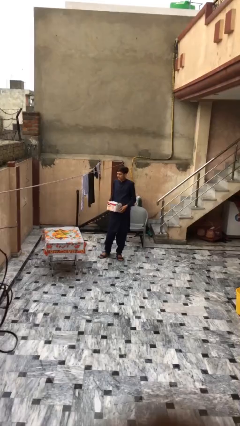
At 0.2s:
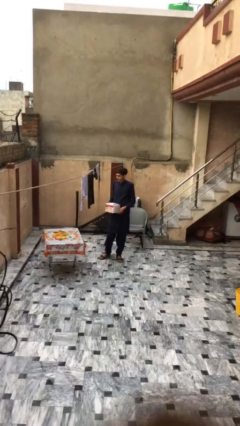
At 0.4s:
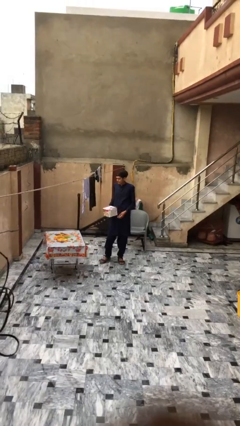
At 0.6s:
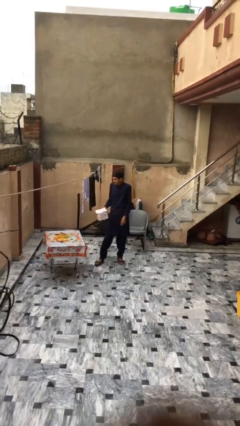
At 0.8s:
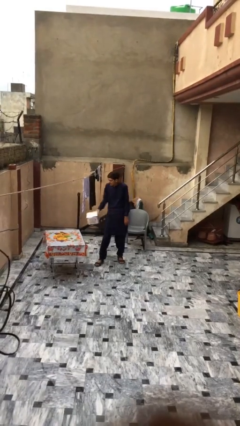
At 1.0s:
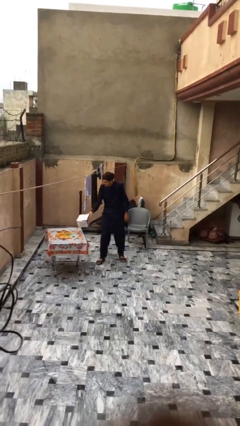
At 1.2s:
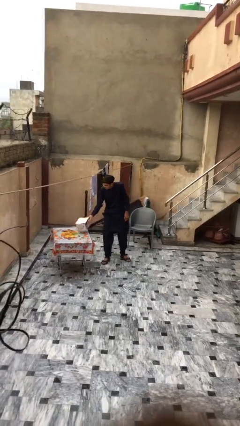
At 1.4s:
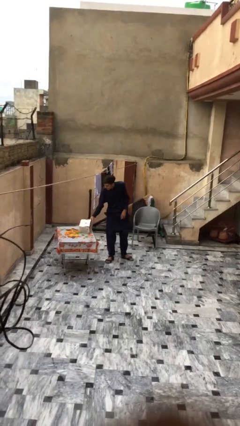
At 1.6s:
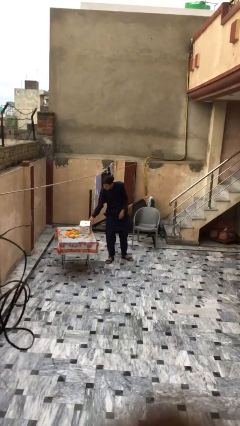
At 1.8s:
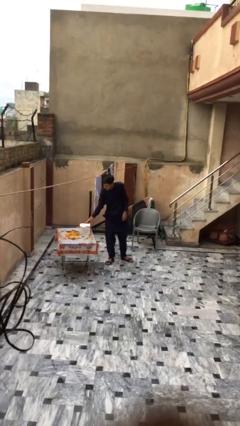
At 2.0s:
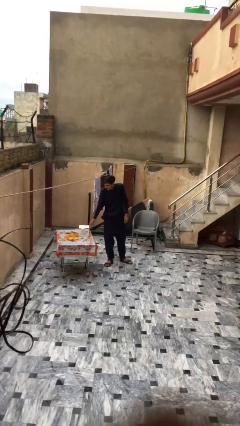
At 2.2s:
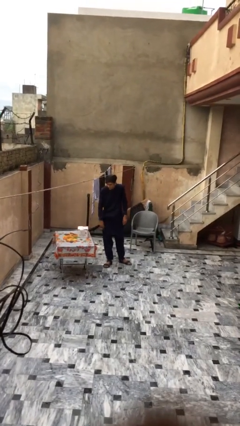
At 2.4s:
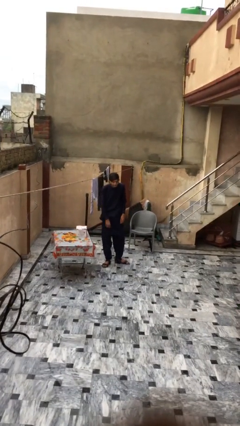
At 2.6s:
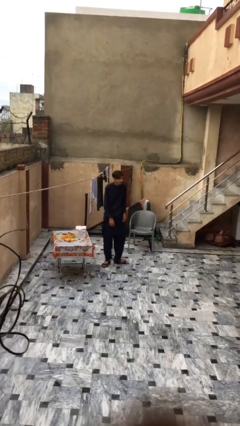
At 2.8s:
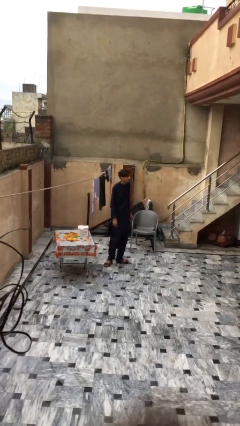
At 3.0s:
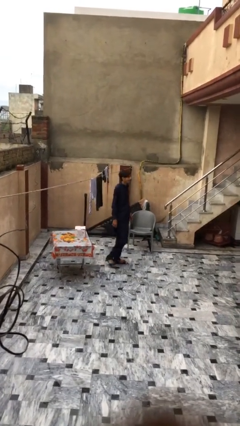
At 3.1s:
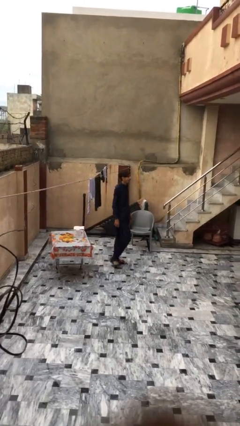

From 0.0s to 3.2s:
person puts down object on table

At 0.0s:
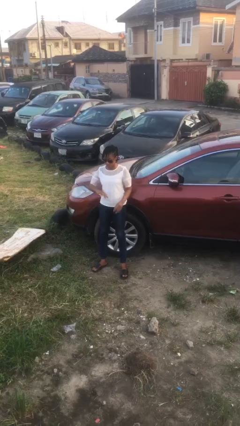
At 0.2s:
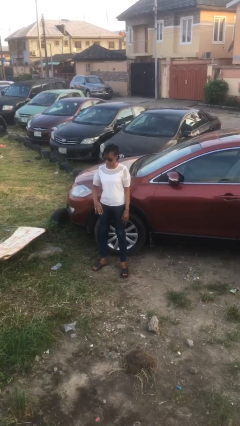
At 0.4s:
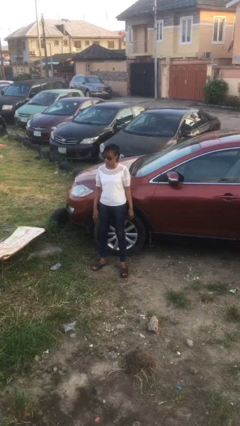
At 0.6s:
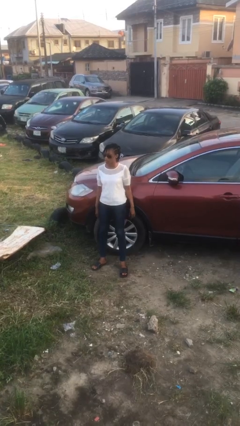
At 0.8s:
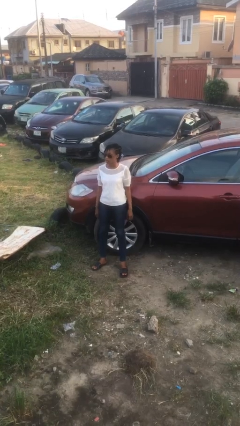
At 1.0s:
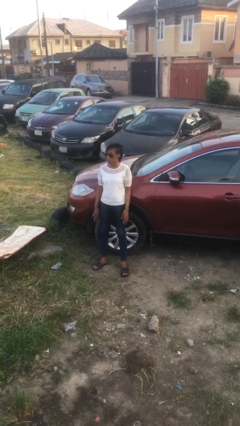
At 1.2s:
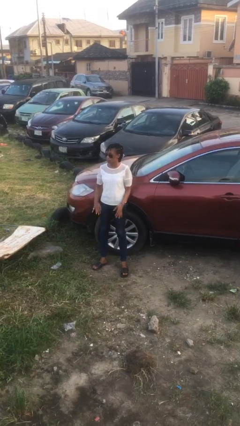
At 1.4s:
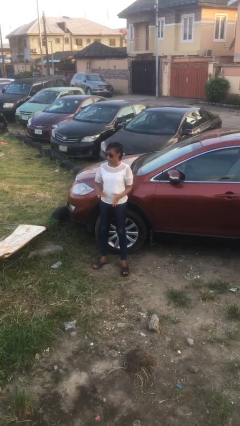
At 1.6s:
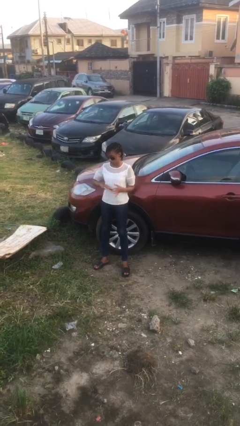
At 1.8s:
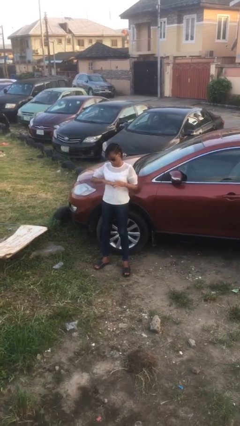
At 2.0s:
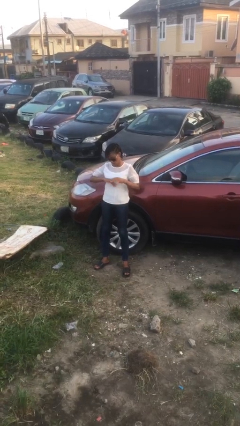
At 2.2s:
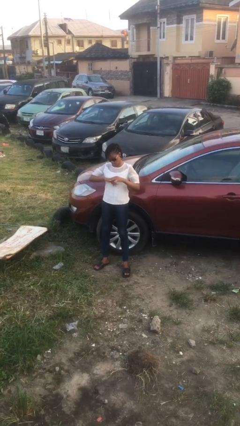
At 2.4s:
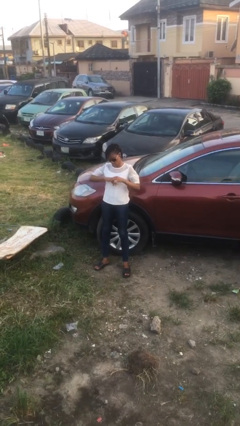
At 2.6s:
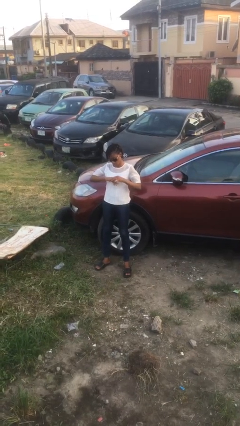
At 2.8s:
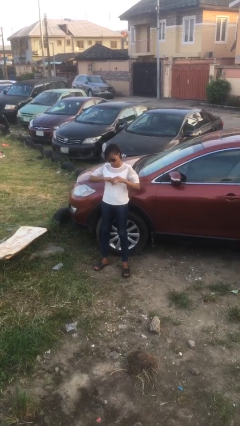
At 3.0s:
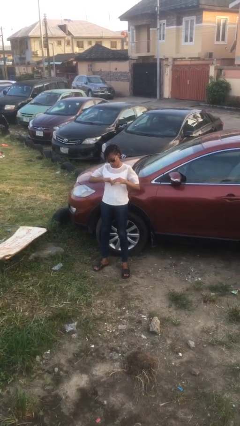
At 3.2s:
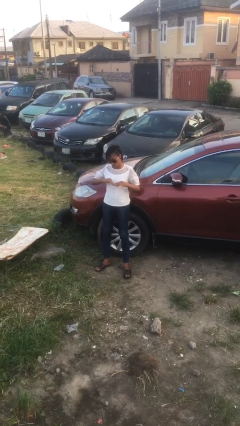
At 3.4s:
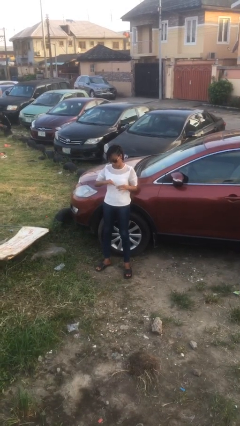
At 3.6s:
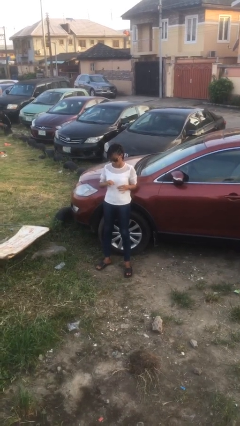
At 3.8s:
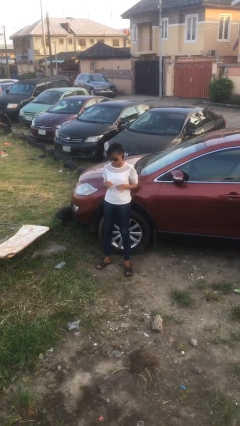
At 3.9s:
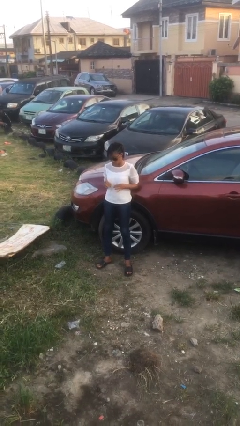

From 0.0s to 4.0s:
person takes off ring

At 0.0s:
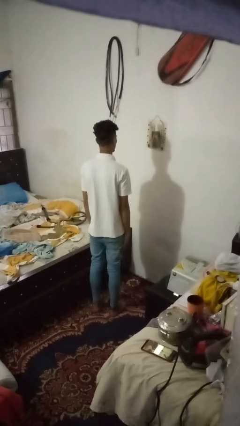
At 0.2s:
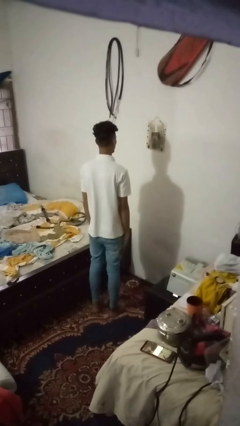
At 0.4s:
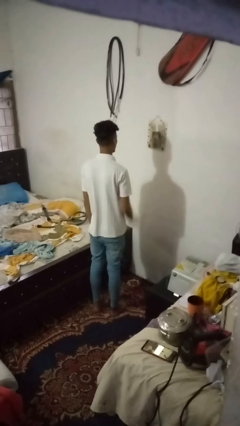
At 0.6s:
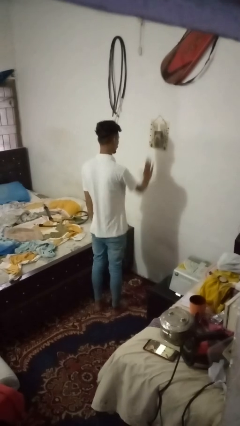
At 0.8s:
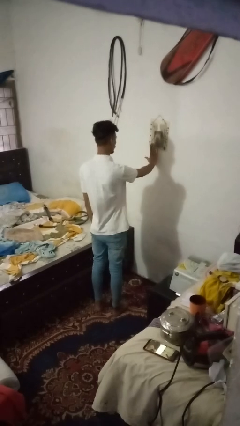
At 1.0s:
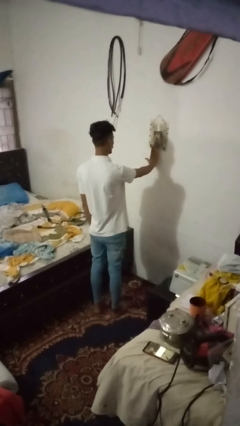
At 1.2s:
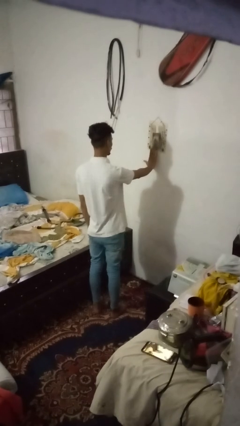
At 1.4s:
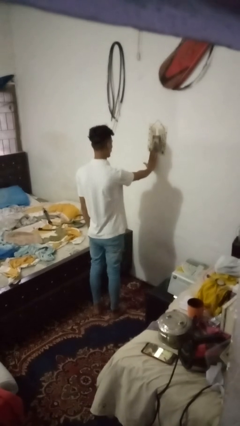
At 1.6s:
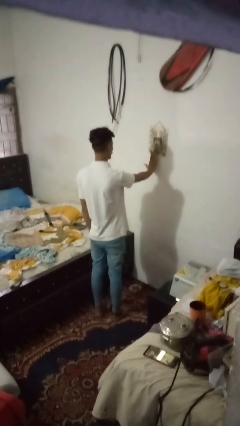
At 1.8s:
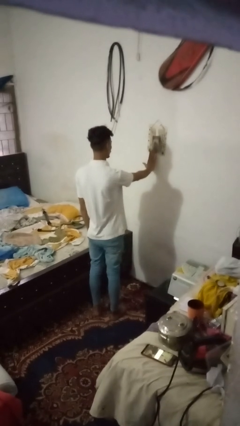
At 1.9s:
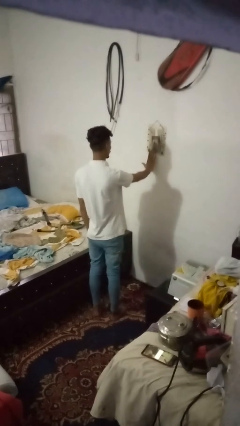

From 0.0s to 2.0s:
person gestures stop

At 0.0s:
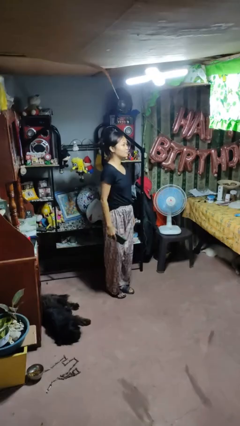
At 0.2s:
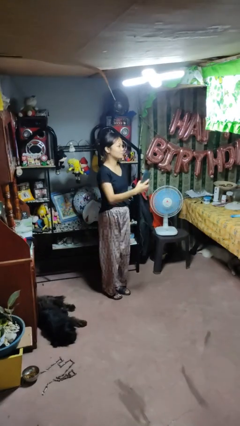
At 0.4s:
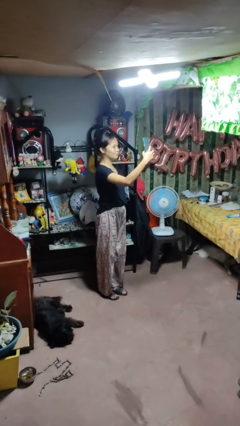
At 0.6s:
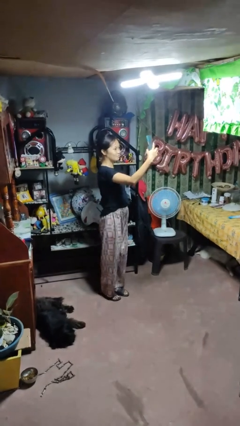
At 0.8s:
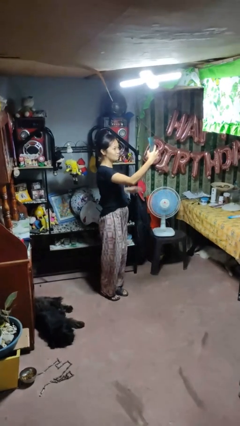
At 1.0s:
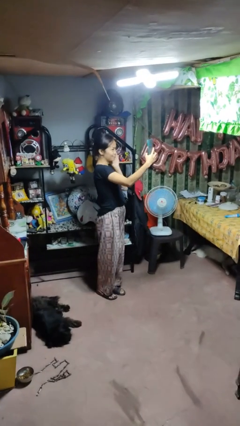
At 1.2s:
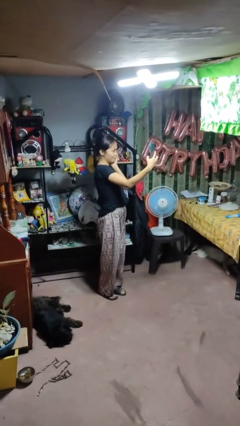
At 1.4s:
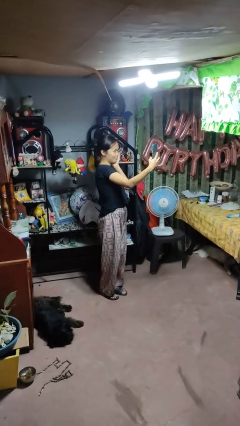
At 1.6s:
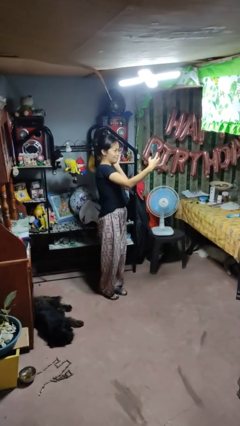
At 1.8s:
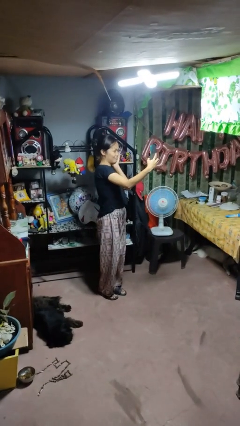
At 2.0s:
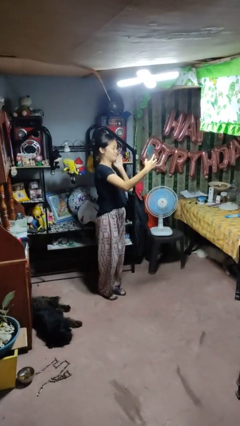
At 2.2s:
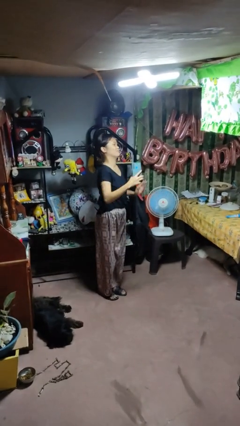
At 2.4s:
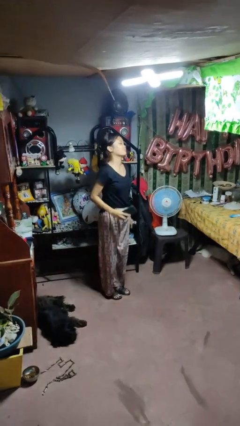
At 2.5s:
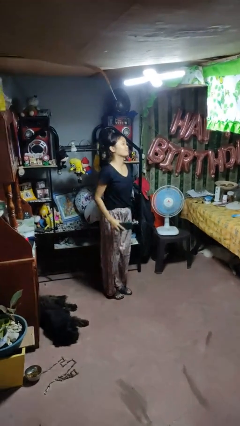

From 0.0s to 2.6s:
person takes selfie

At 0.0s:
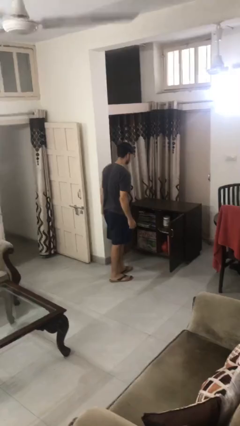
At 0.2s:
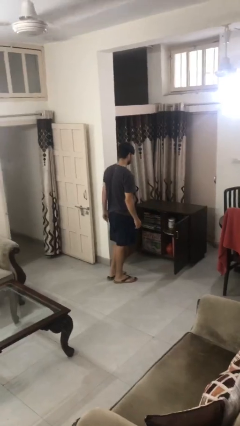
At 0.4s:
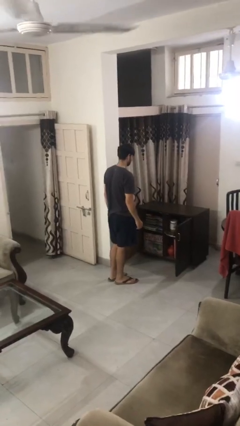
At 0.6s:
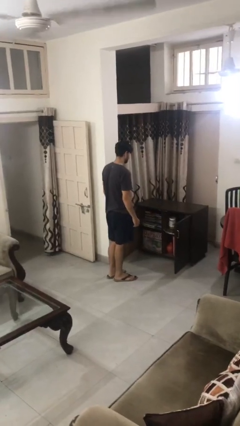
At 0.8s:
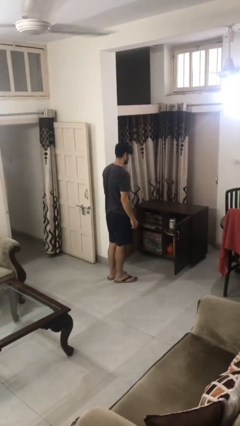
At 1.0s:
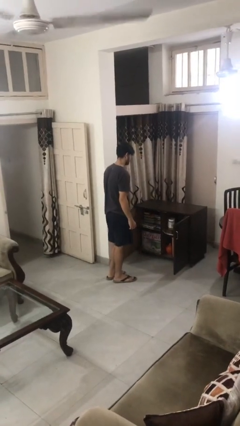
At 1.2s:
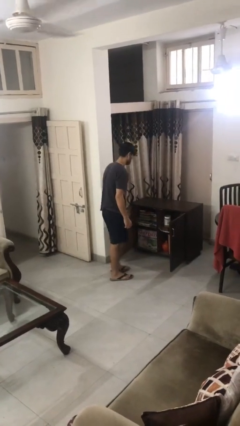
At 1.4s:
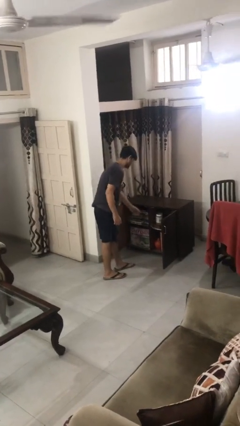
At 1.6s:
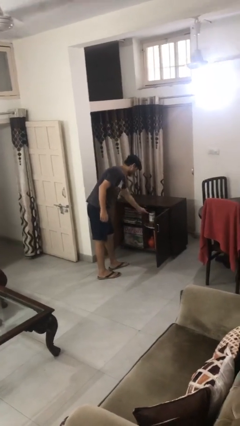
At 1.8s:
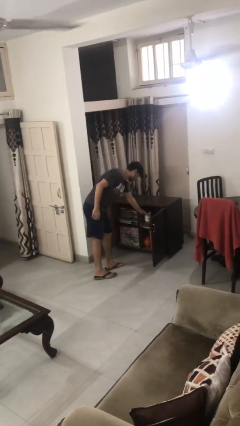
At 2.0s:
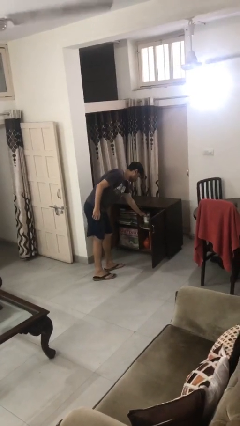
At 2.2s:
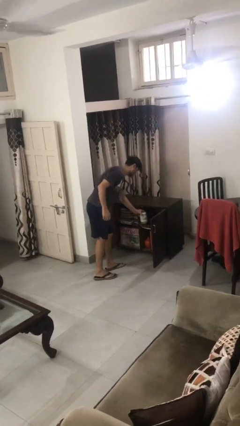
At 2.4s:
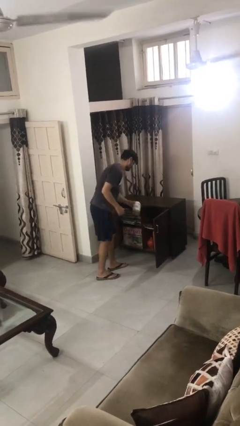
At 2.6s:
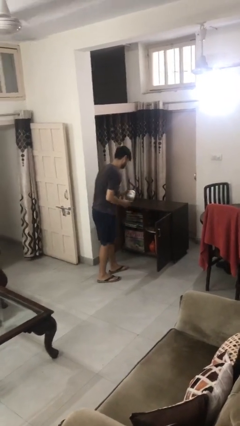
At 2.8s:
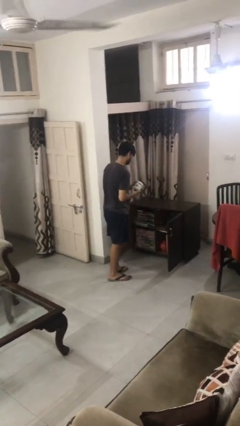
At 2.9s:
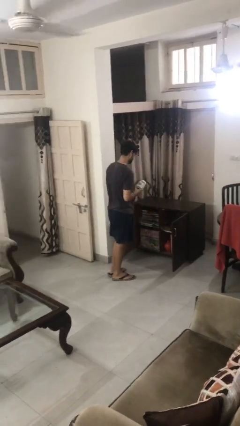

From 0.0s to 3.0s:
person picks up object from cabinet

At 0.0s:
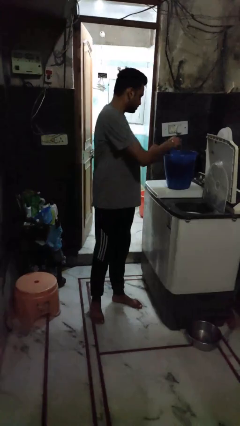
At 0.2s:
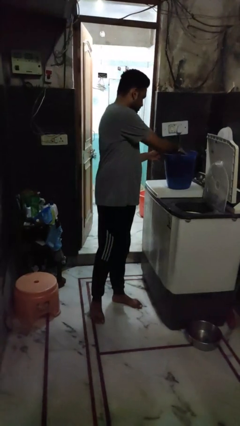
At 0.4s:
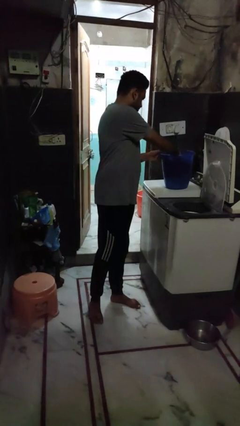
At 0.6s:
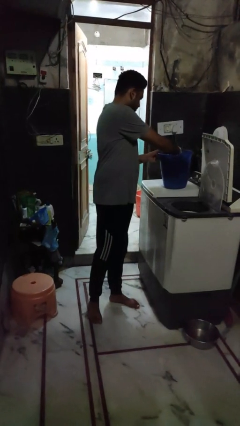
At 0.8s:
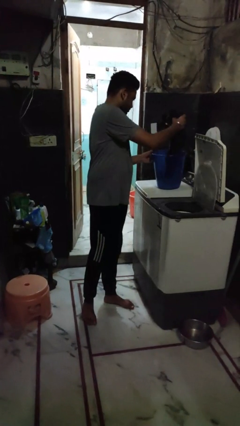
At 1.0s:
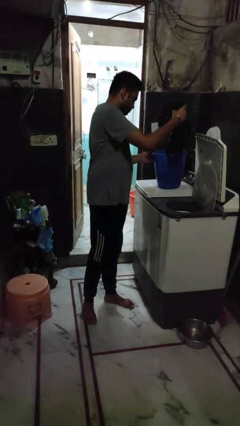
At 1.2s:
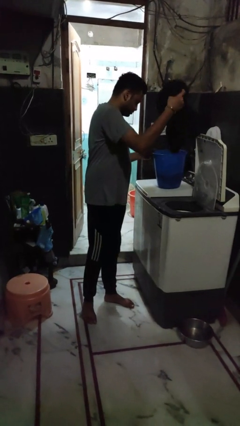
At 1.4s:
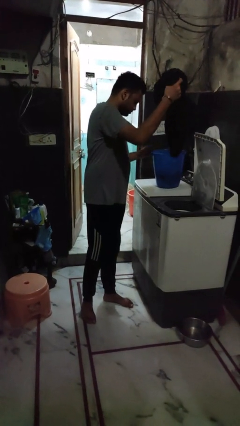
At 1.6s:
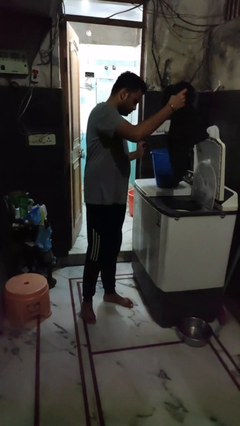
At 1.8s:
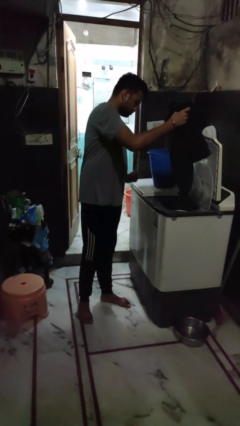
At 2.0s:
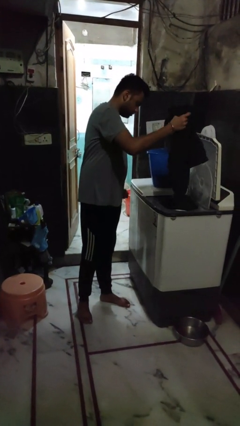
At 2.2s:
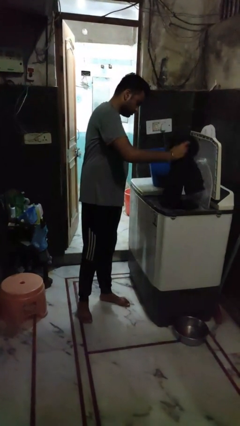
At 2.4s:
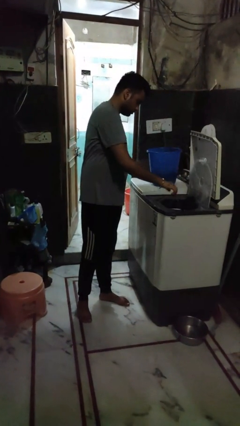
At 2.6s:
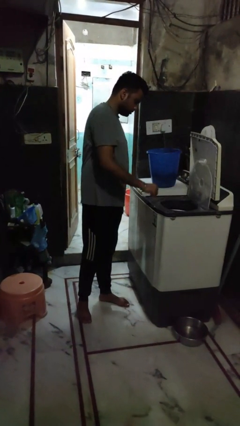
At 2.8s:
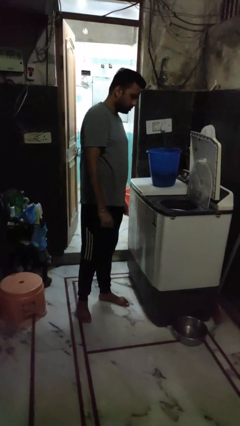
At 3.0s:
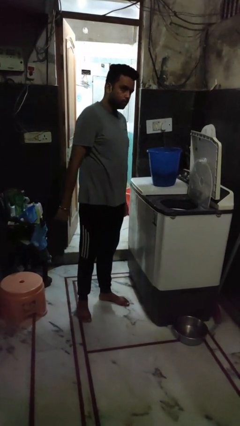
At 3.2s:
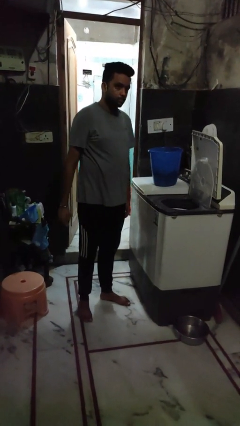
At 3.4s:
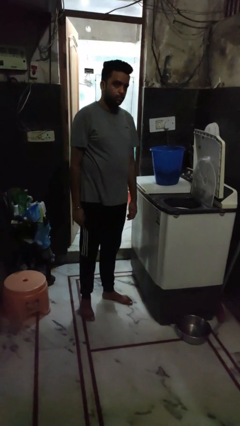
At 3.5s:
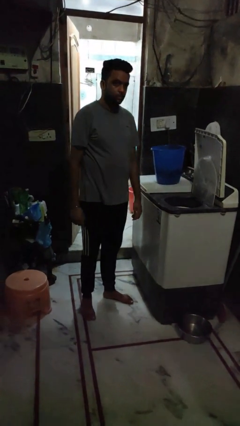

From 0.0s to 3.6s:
person loads dryer
